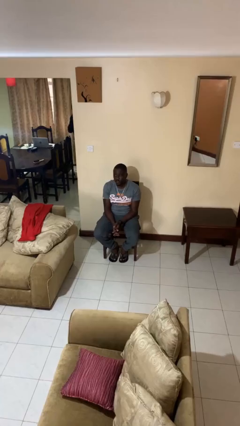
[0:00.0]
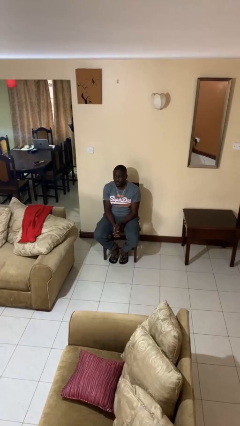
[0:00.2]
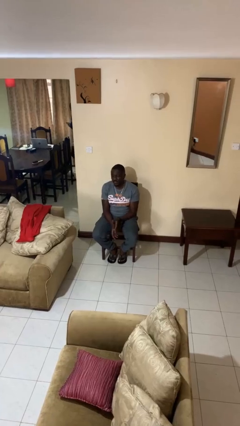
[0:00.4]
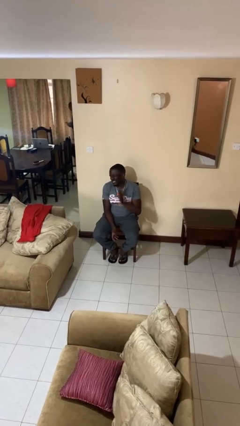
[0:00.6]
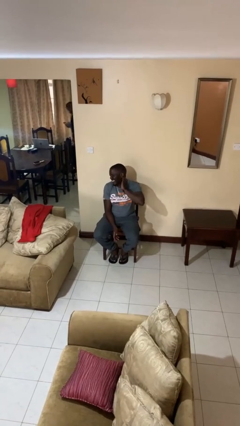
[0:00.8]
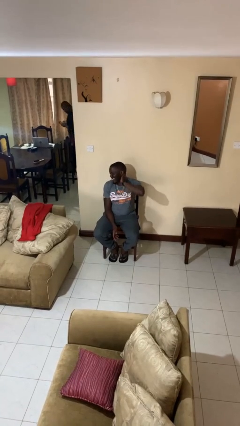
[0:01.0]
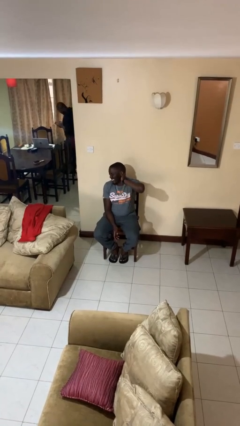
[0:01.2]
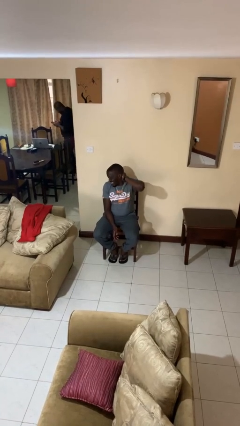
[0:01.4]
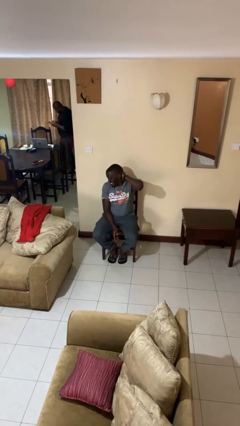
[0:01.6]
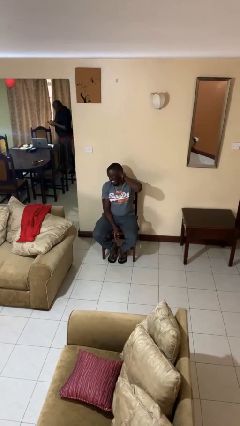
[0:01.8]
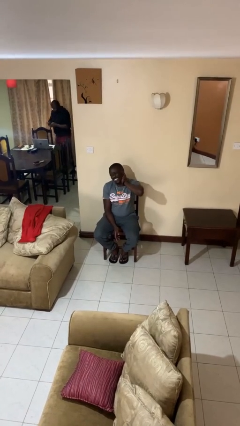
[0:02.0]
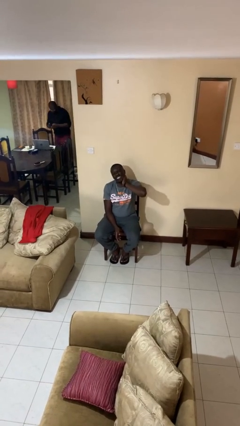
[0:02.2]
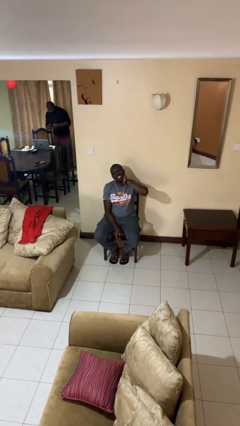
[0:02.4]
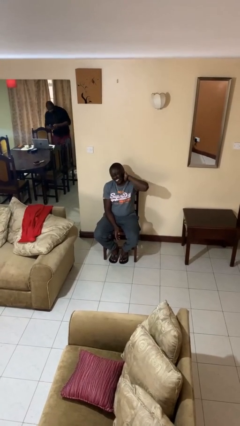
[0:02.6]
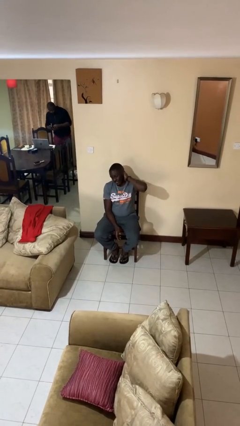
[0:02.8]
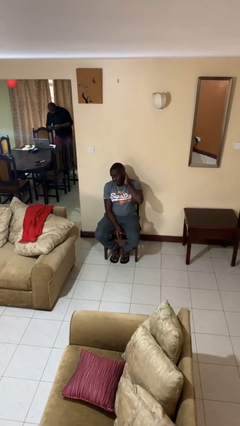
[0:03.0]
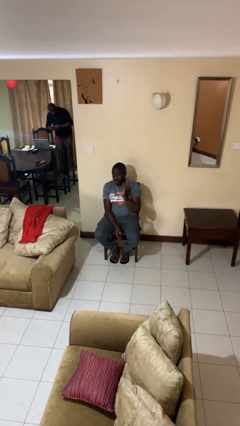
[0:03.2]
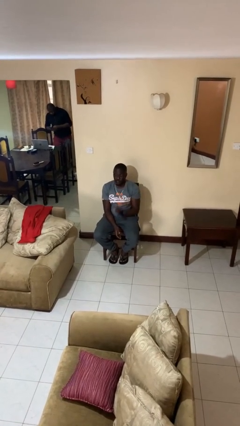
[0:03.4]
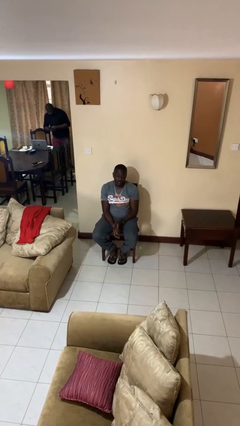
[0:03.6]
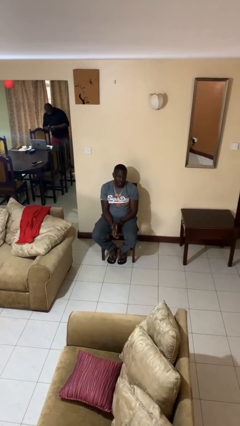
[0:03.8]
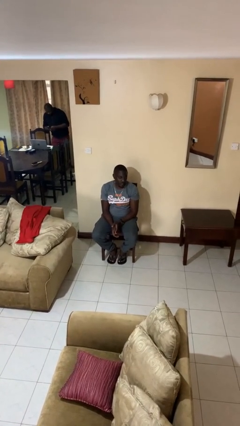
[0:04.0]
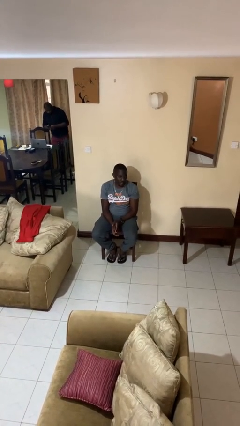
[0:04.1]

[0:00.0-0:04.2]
person rubs neck

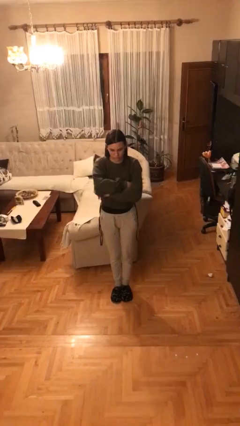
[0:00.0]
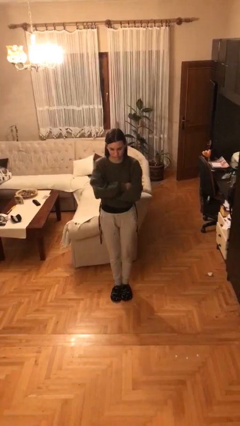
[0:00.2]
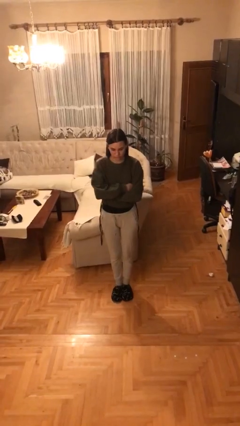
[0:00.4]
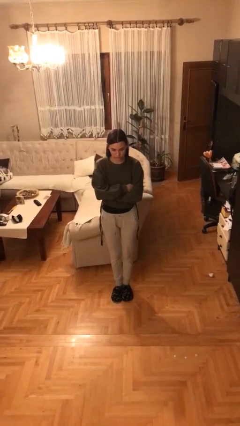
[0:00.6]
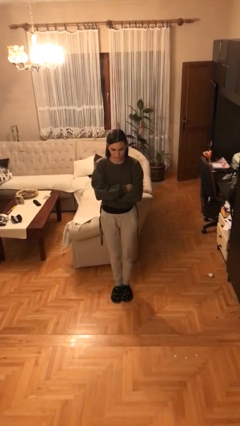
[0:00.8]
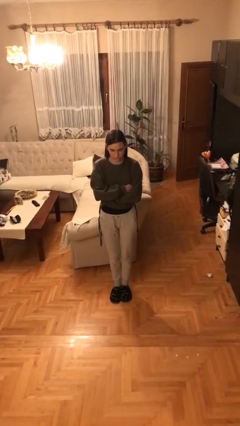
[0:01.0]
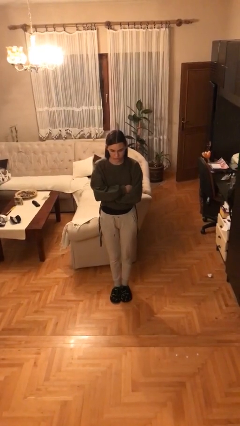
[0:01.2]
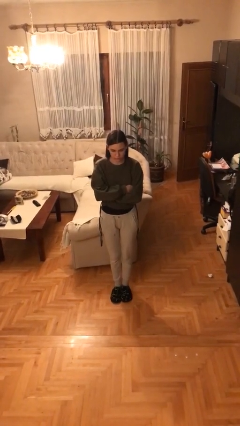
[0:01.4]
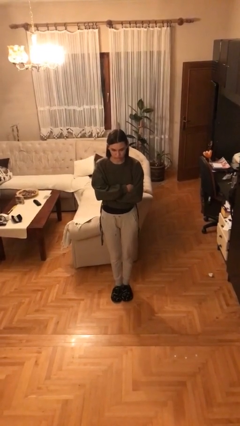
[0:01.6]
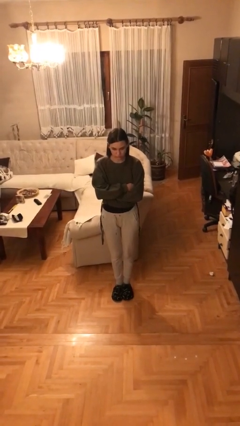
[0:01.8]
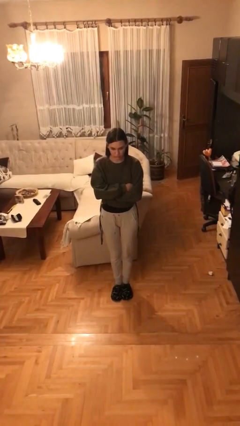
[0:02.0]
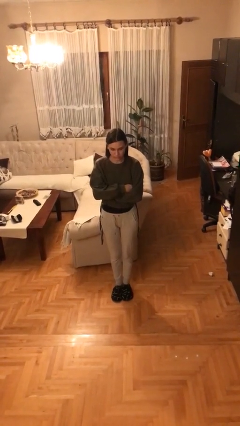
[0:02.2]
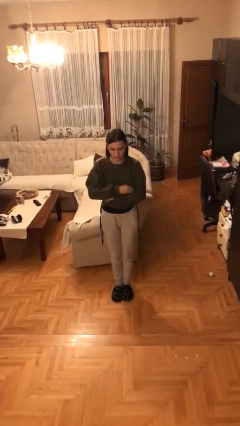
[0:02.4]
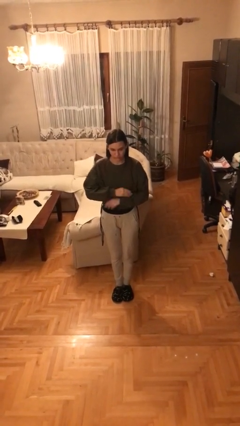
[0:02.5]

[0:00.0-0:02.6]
person crosses arms

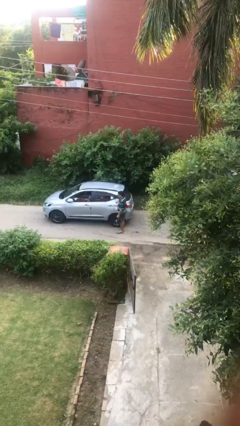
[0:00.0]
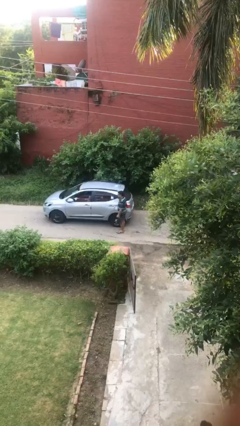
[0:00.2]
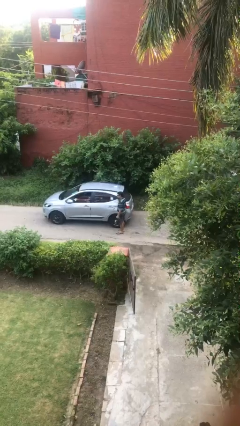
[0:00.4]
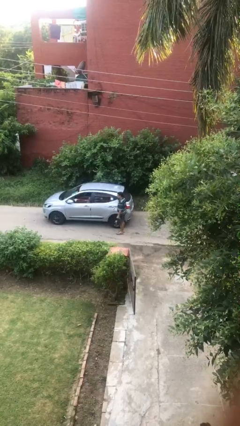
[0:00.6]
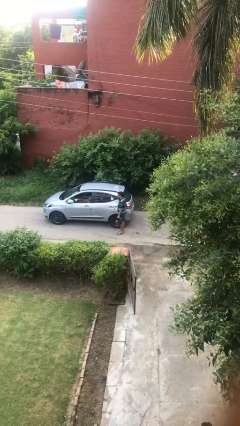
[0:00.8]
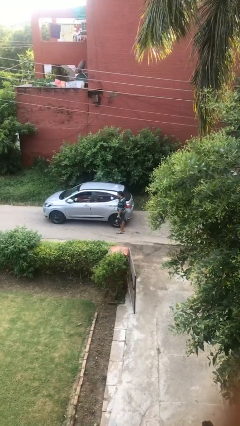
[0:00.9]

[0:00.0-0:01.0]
person closes car door

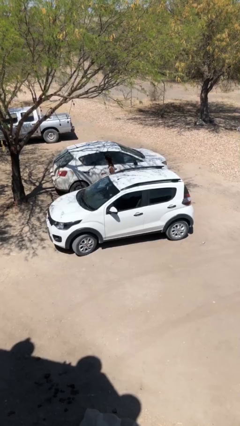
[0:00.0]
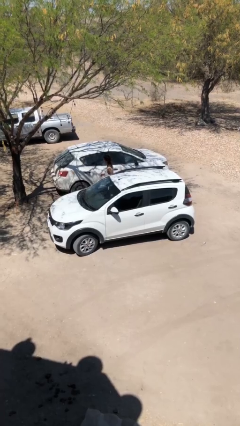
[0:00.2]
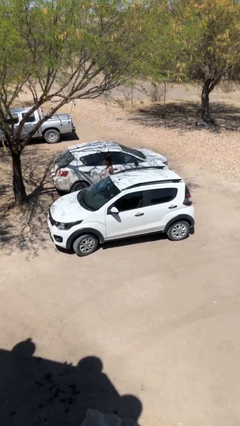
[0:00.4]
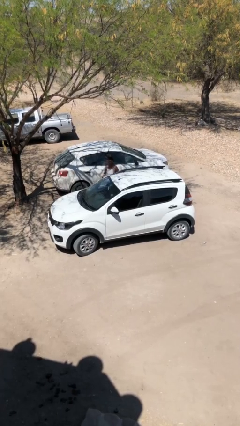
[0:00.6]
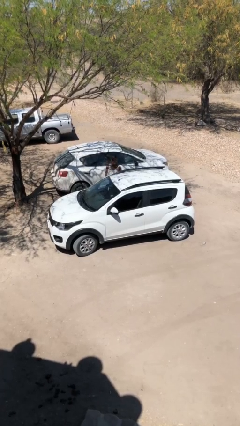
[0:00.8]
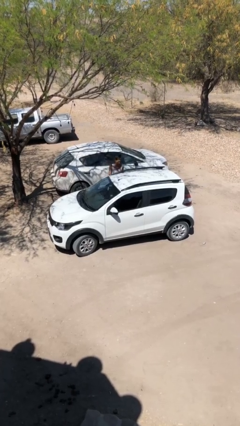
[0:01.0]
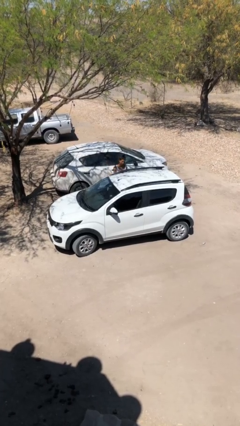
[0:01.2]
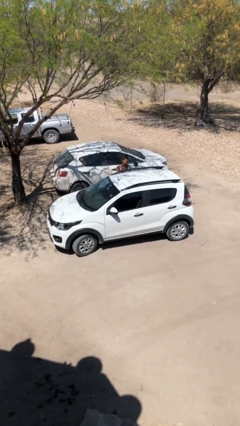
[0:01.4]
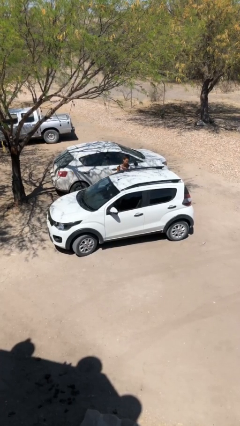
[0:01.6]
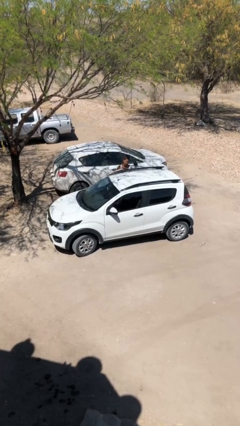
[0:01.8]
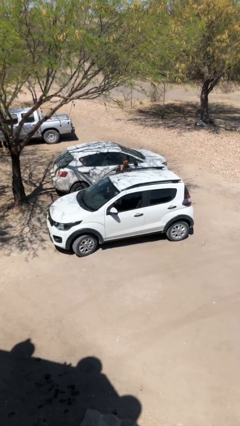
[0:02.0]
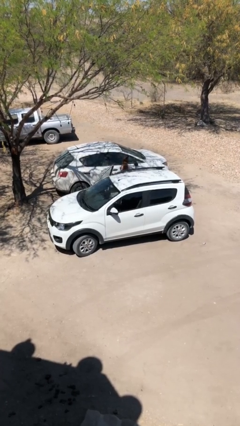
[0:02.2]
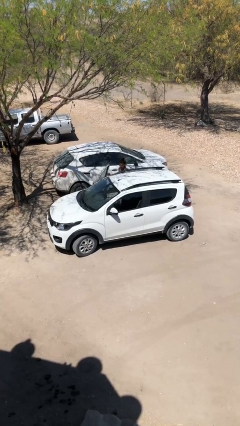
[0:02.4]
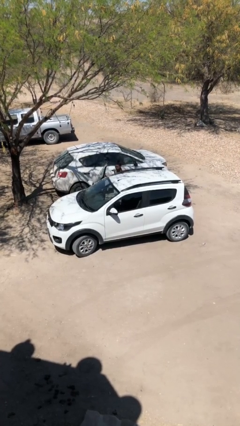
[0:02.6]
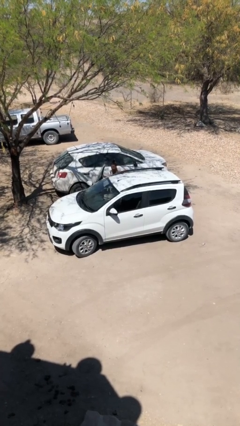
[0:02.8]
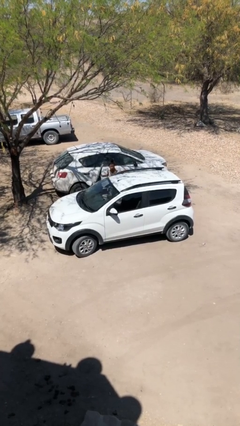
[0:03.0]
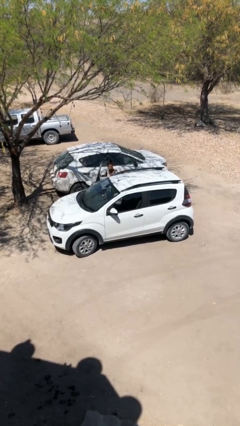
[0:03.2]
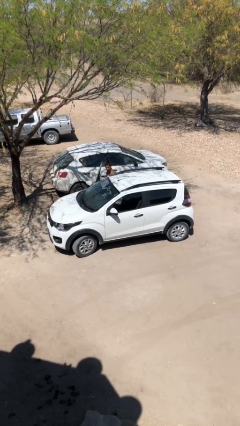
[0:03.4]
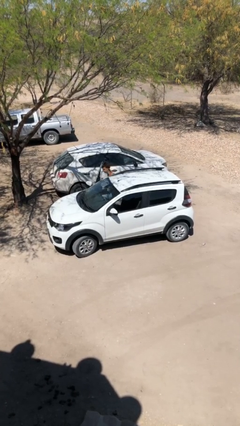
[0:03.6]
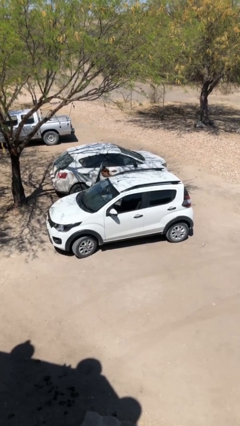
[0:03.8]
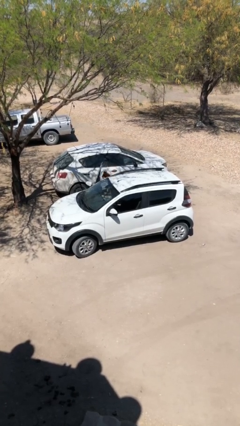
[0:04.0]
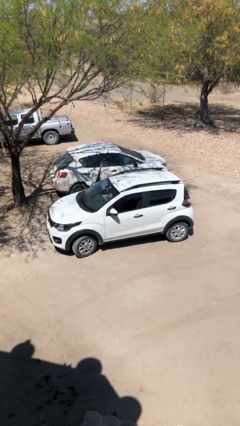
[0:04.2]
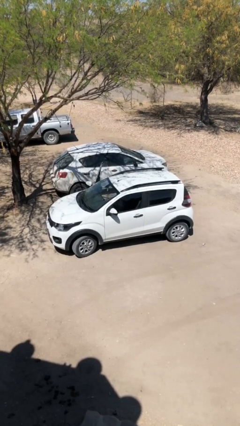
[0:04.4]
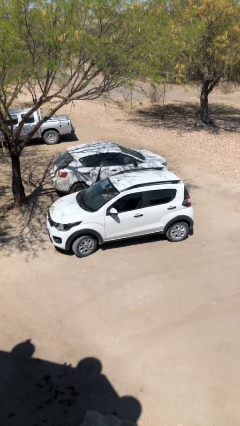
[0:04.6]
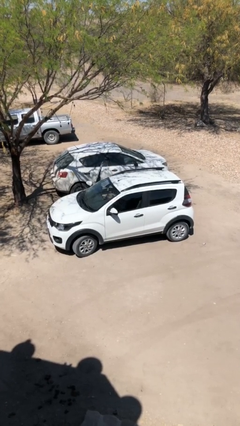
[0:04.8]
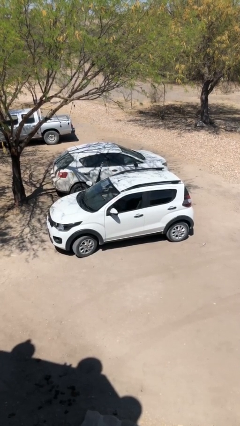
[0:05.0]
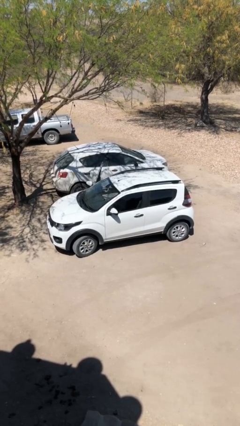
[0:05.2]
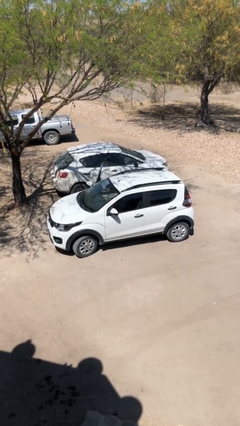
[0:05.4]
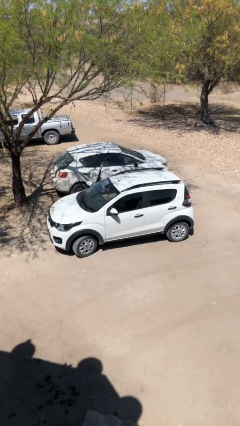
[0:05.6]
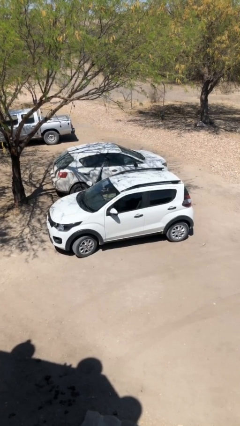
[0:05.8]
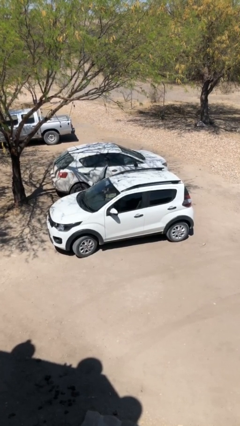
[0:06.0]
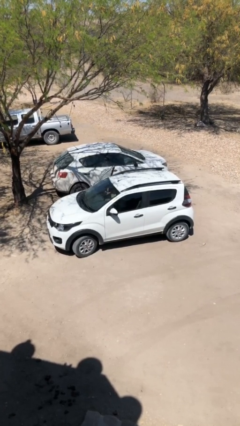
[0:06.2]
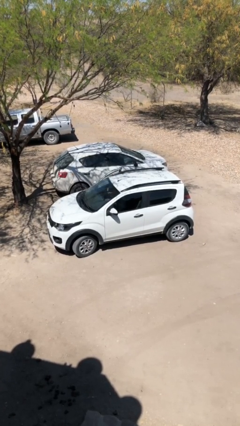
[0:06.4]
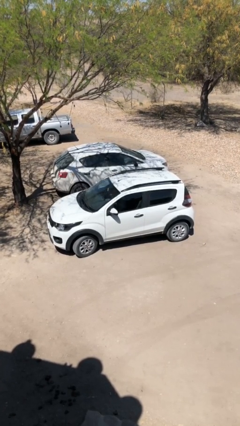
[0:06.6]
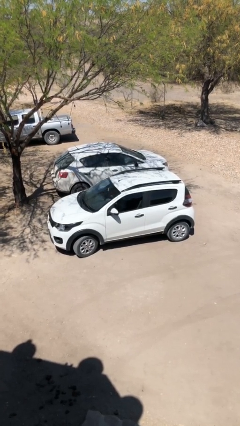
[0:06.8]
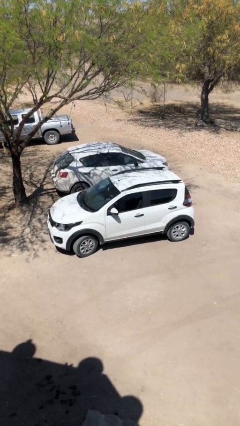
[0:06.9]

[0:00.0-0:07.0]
car picks up person

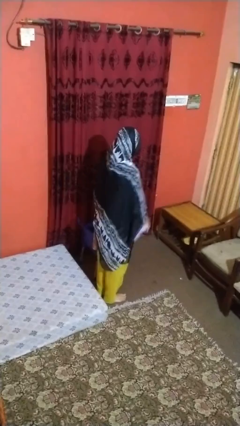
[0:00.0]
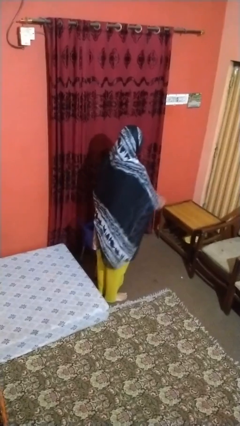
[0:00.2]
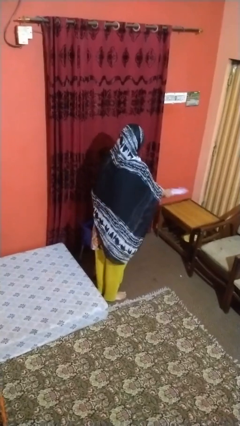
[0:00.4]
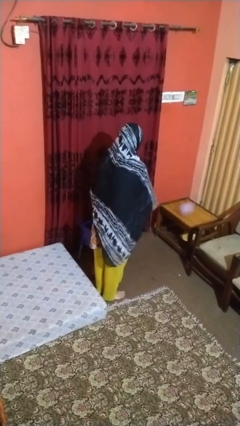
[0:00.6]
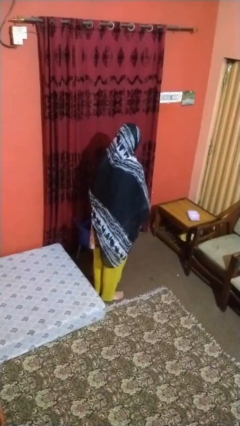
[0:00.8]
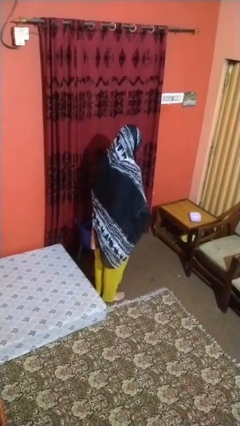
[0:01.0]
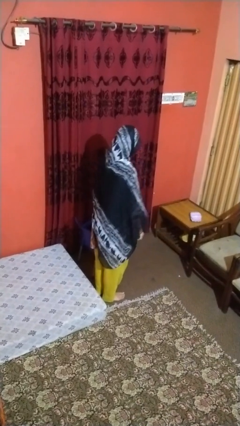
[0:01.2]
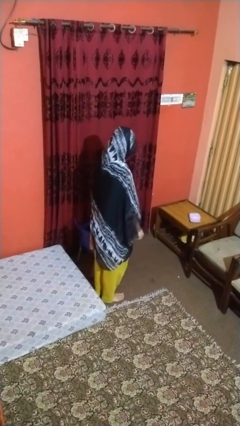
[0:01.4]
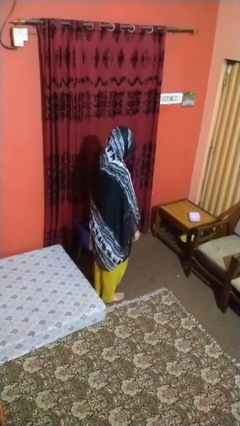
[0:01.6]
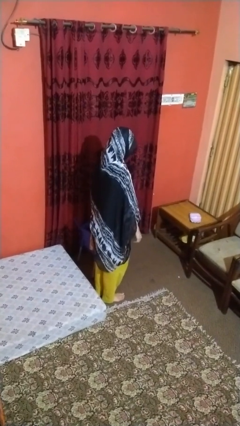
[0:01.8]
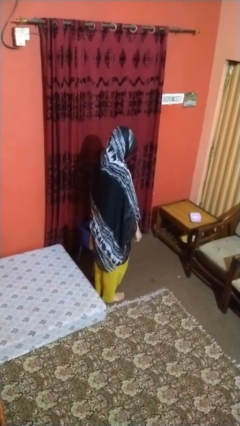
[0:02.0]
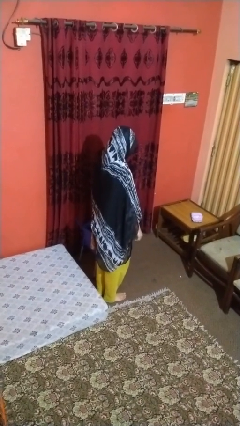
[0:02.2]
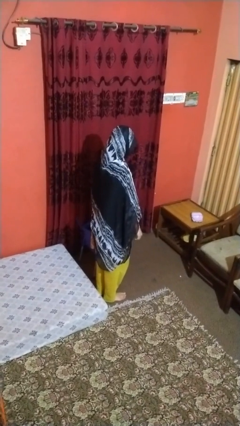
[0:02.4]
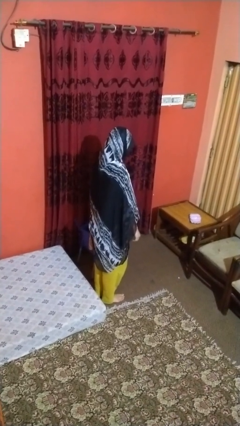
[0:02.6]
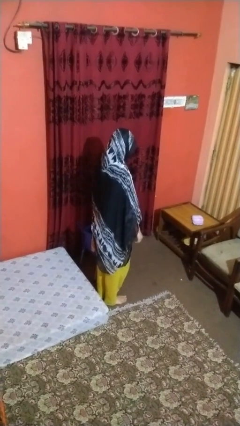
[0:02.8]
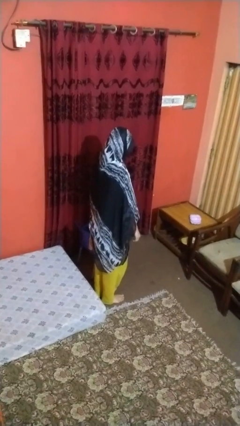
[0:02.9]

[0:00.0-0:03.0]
person throws object on table
